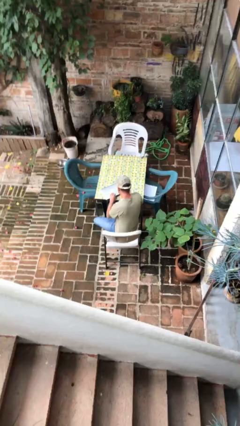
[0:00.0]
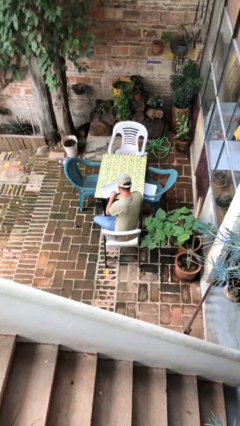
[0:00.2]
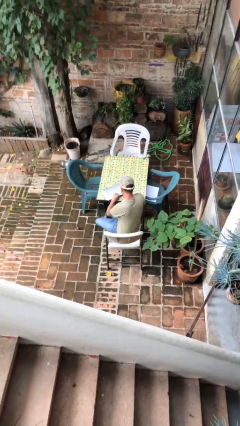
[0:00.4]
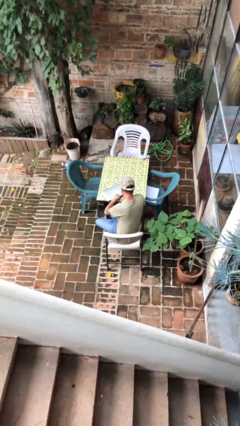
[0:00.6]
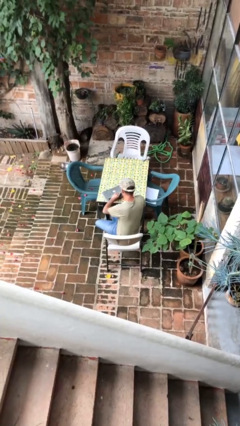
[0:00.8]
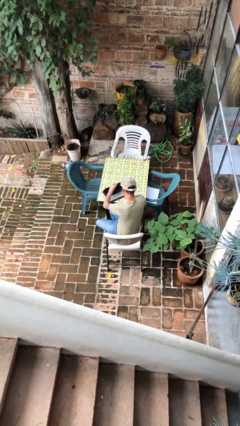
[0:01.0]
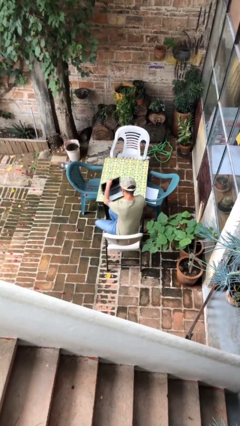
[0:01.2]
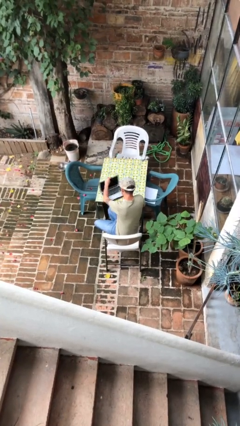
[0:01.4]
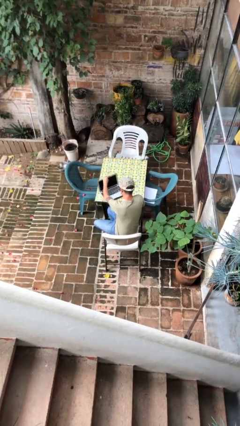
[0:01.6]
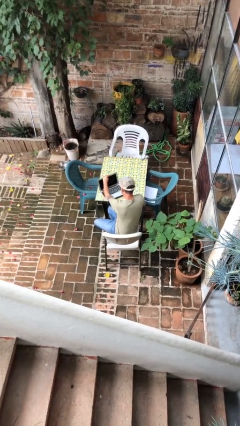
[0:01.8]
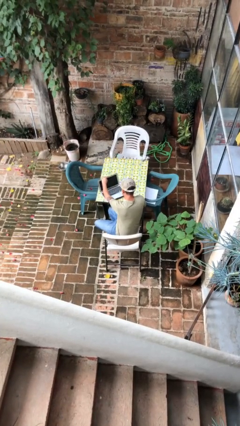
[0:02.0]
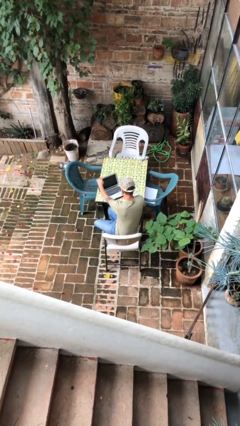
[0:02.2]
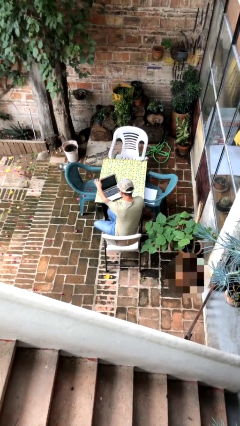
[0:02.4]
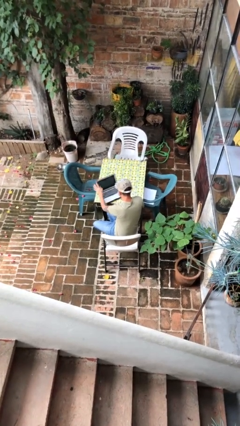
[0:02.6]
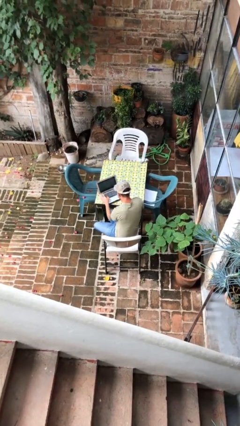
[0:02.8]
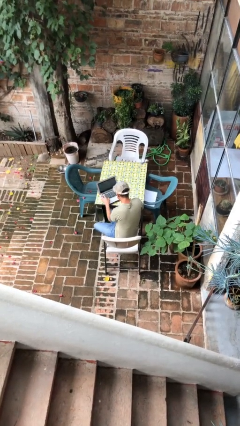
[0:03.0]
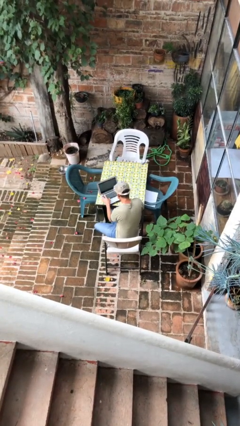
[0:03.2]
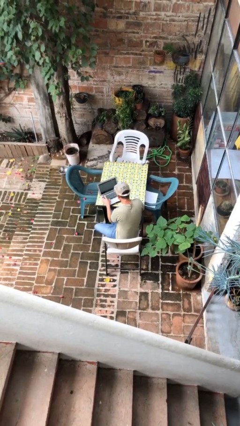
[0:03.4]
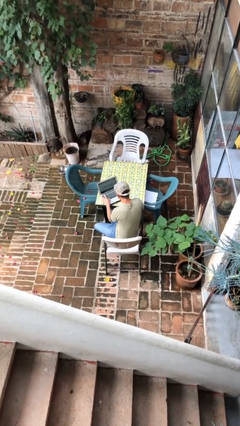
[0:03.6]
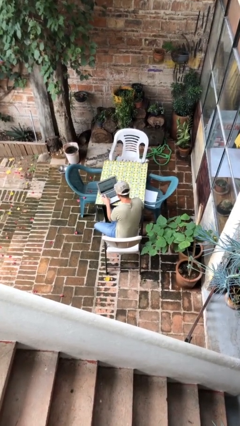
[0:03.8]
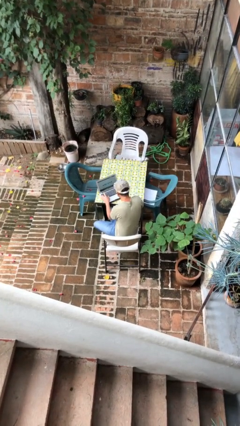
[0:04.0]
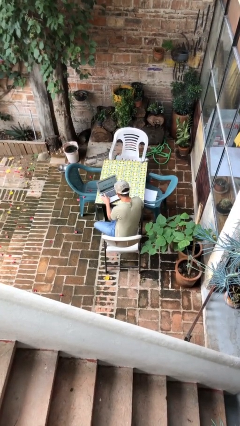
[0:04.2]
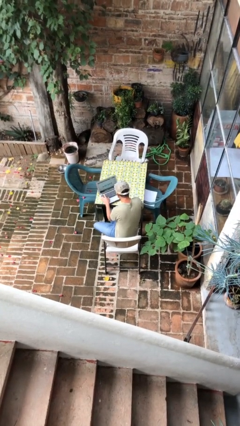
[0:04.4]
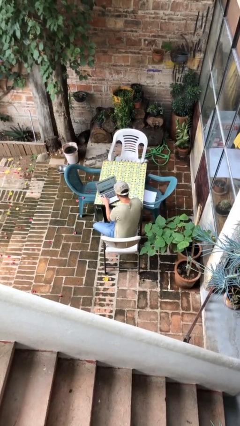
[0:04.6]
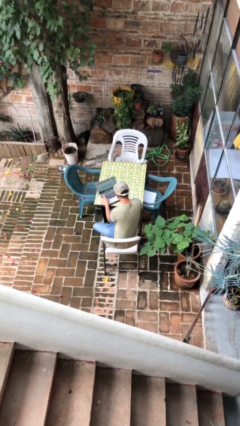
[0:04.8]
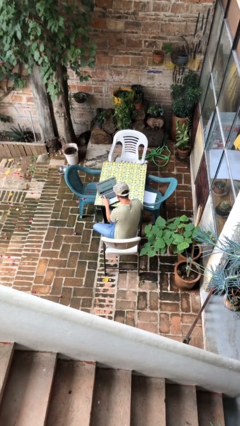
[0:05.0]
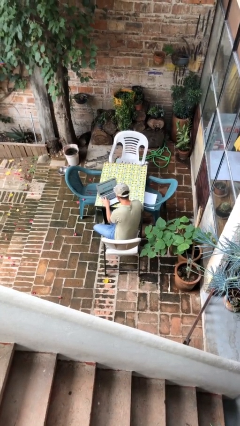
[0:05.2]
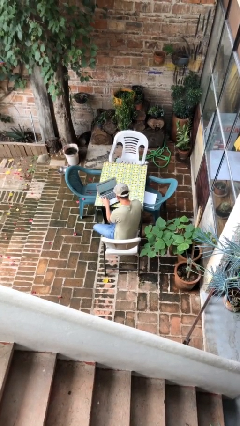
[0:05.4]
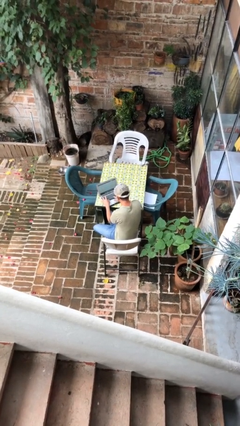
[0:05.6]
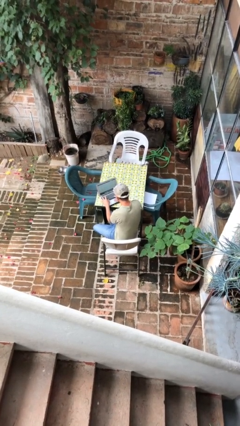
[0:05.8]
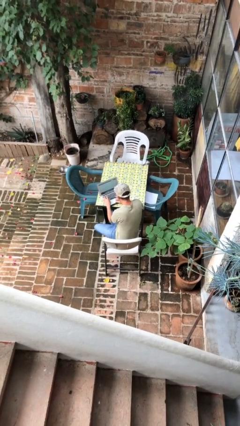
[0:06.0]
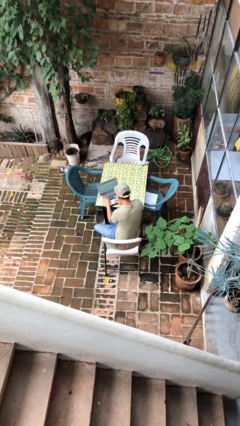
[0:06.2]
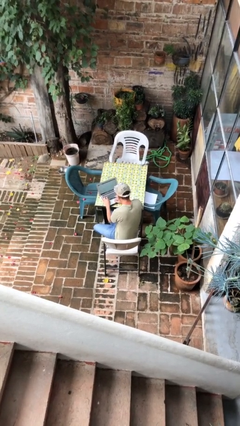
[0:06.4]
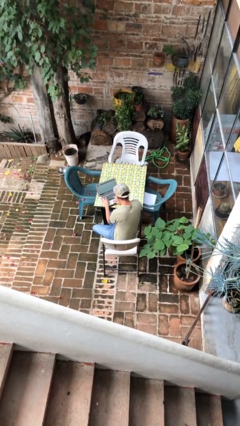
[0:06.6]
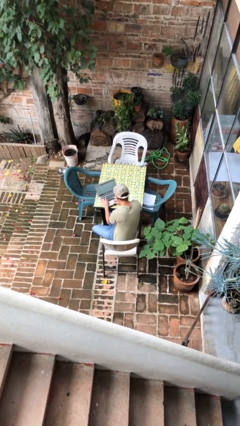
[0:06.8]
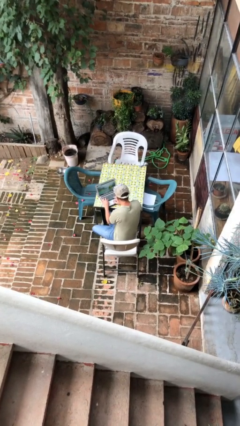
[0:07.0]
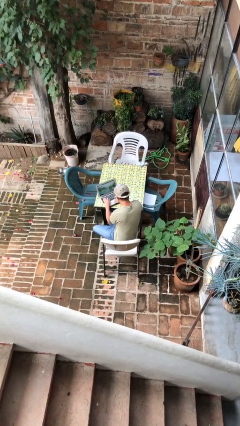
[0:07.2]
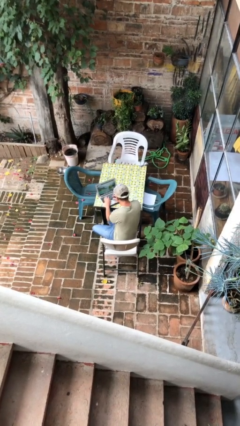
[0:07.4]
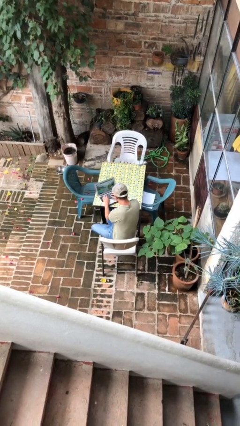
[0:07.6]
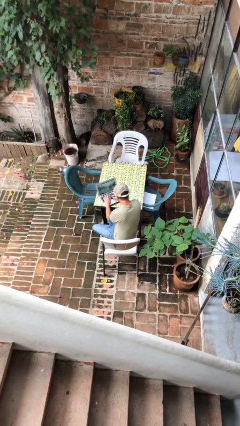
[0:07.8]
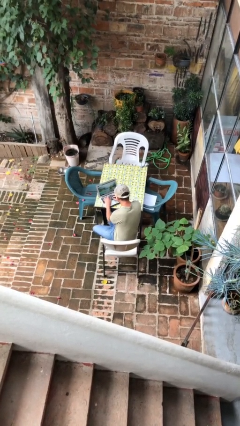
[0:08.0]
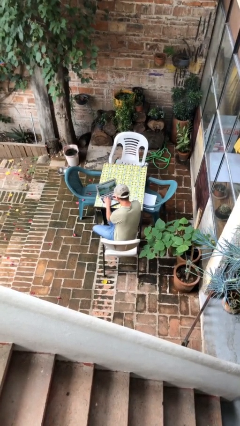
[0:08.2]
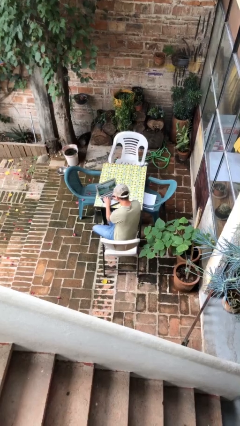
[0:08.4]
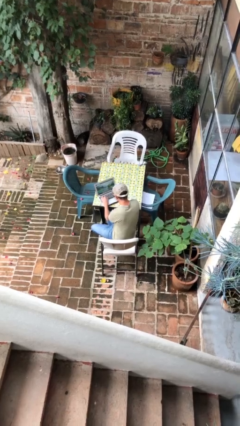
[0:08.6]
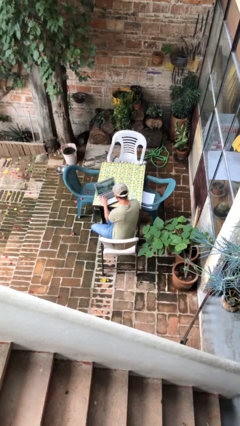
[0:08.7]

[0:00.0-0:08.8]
person interacts with laptop

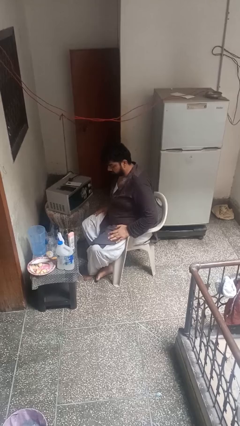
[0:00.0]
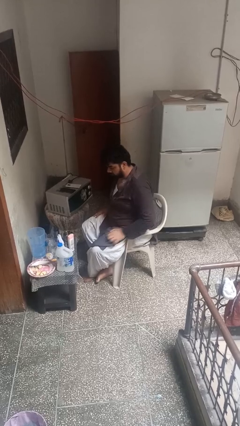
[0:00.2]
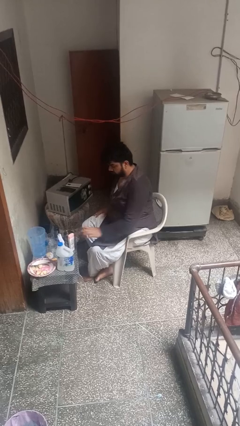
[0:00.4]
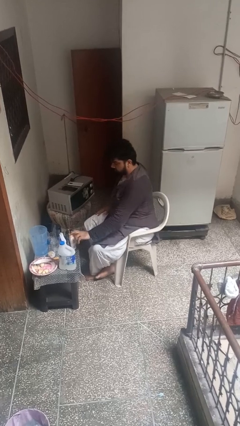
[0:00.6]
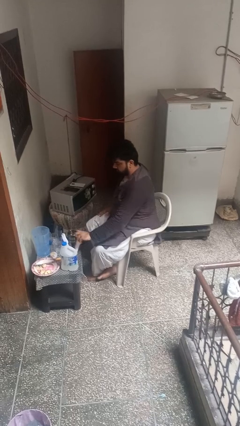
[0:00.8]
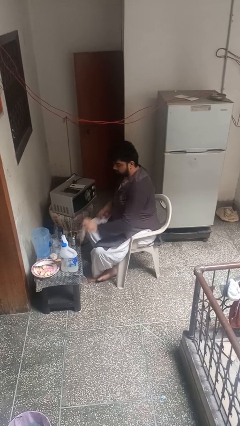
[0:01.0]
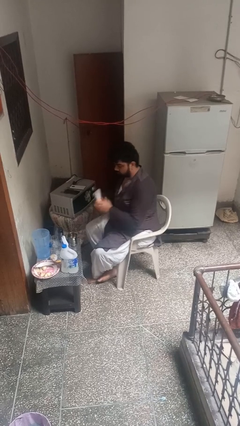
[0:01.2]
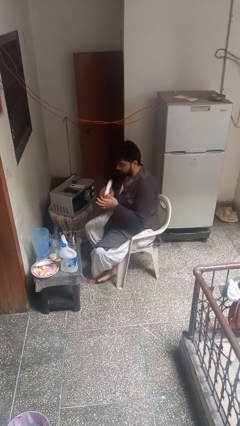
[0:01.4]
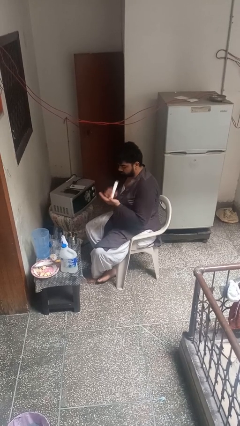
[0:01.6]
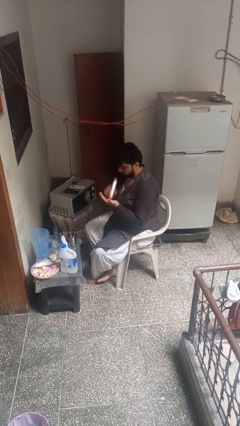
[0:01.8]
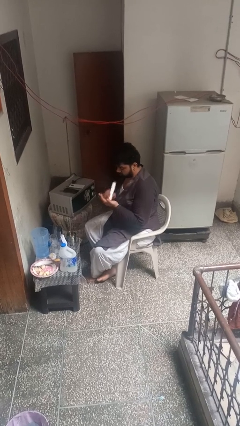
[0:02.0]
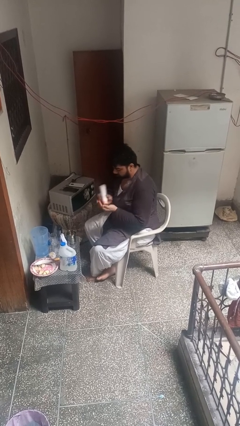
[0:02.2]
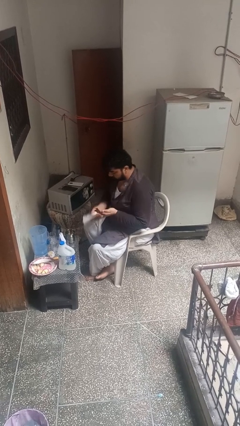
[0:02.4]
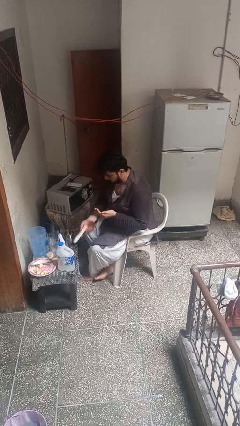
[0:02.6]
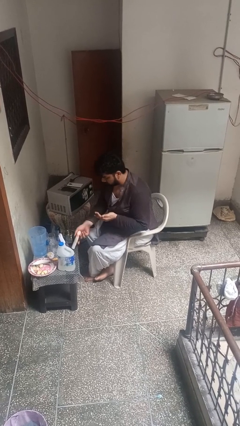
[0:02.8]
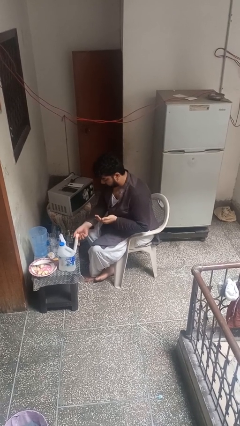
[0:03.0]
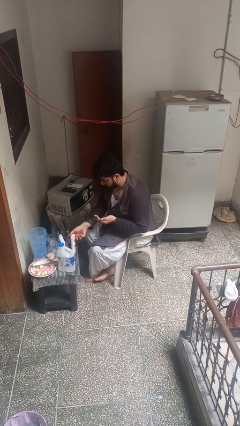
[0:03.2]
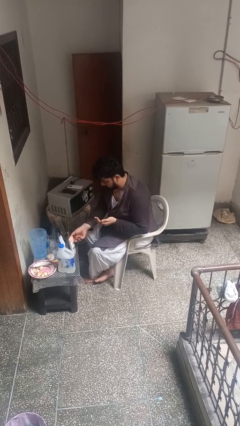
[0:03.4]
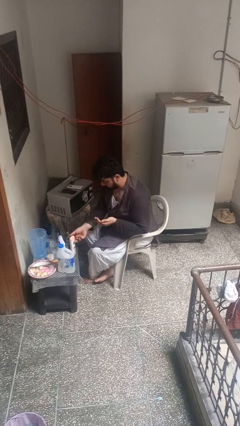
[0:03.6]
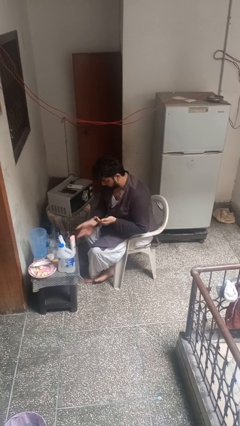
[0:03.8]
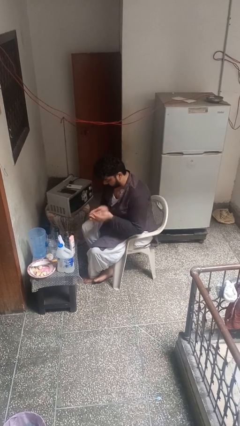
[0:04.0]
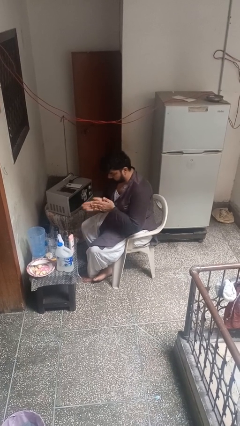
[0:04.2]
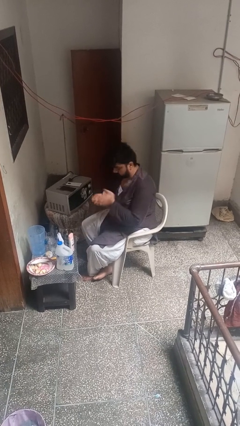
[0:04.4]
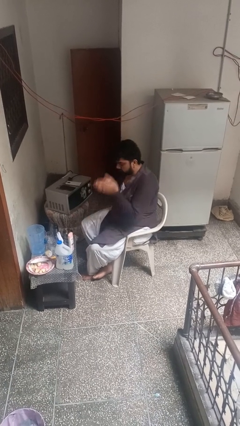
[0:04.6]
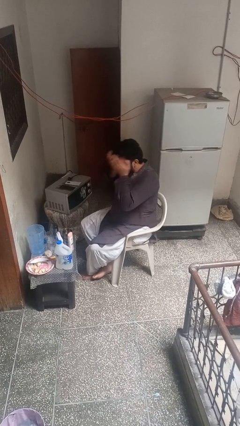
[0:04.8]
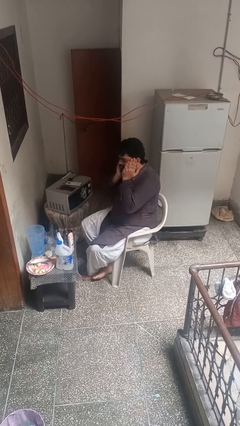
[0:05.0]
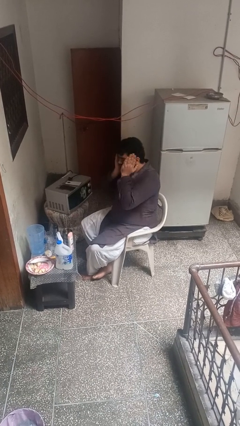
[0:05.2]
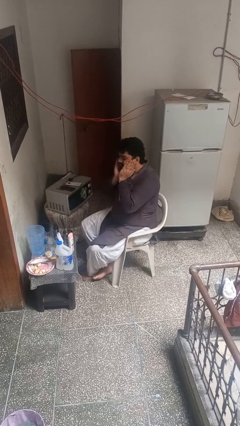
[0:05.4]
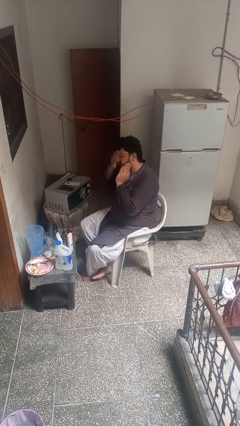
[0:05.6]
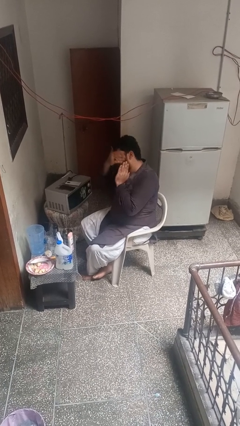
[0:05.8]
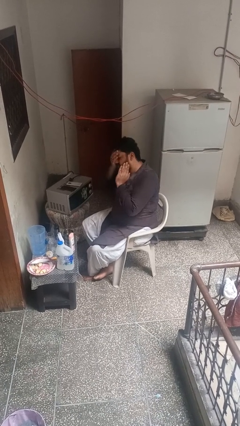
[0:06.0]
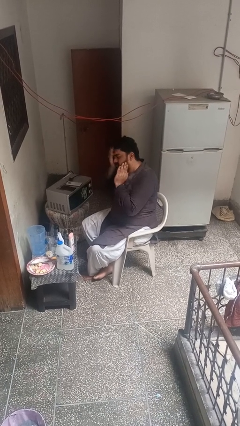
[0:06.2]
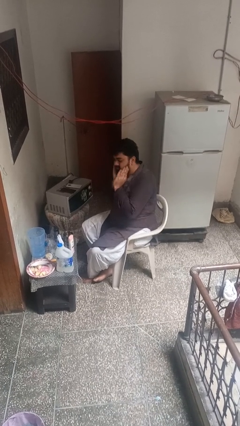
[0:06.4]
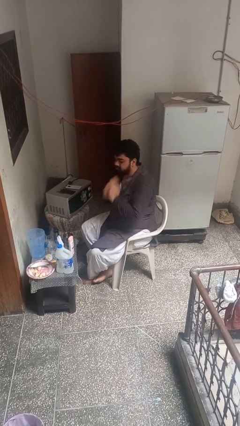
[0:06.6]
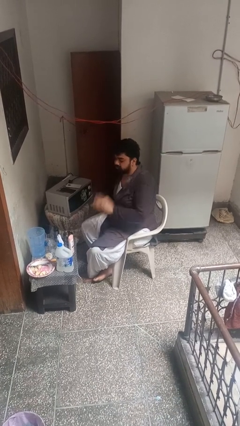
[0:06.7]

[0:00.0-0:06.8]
person applies facial moisturizer

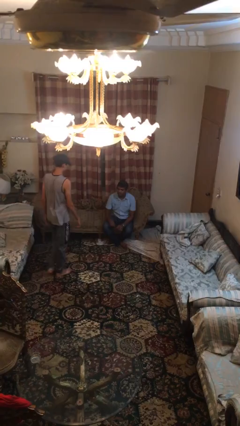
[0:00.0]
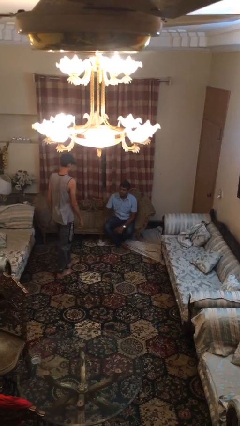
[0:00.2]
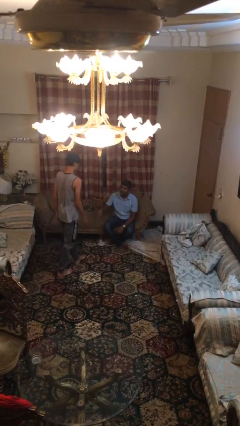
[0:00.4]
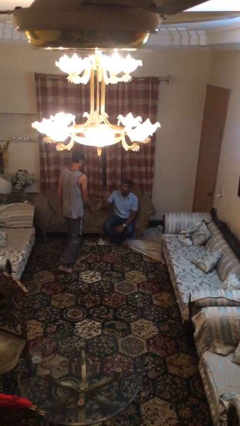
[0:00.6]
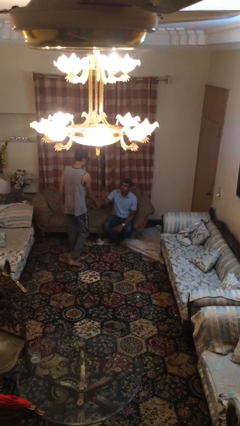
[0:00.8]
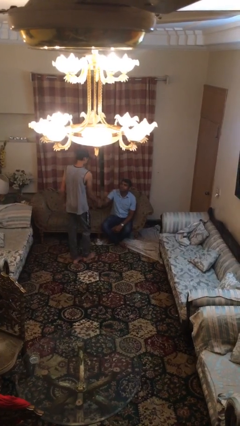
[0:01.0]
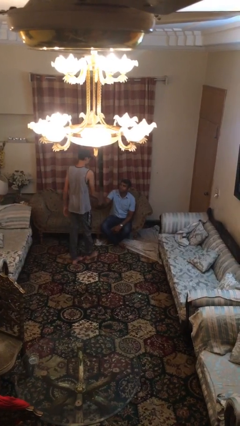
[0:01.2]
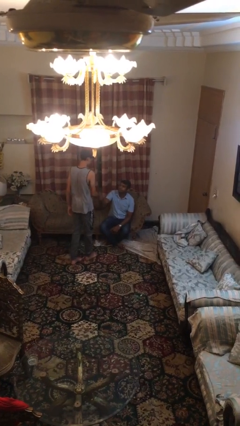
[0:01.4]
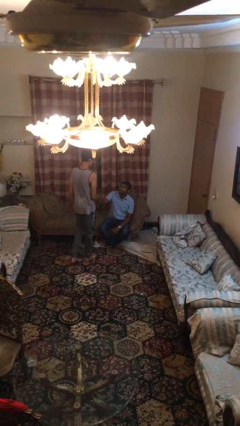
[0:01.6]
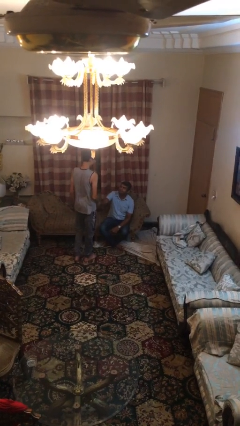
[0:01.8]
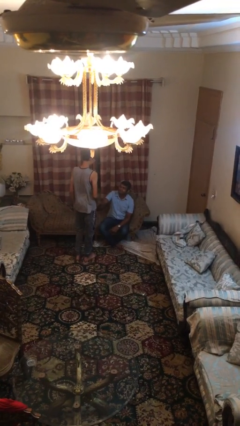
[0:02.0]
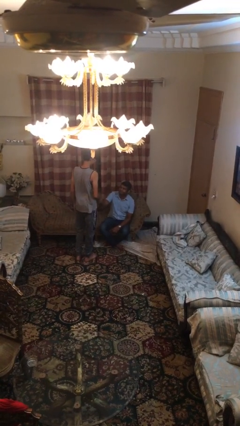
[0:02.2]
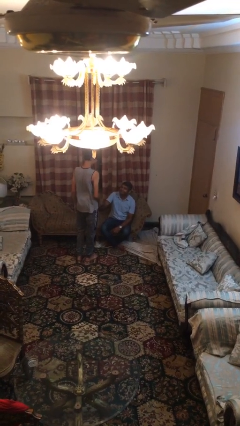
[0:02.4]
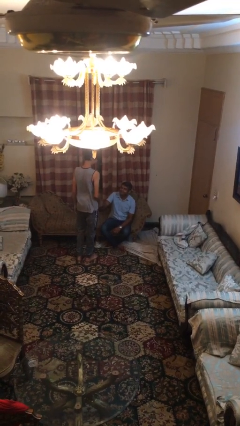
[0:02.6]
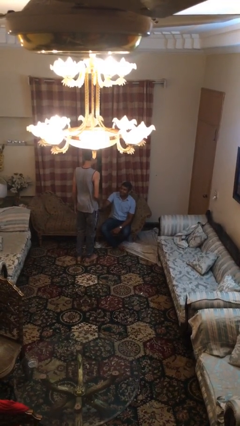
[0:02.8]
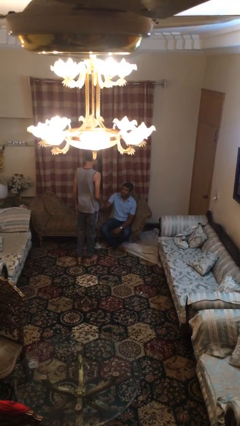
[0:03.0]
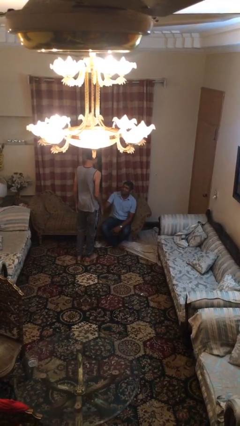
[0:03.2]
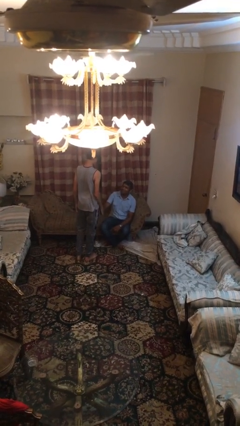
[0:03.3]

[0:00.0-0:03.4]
person shakes hand
